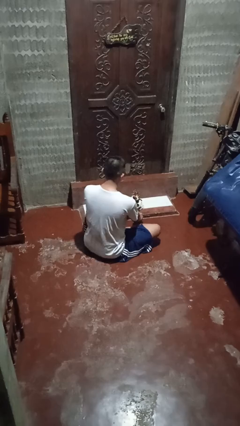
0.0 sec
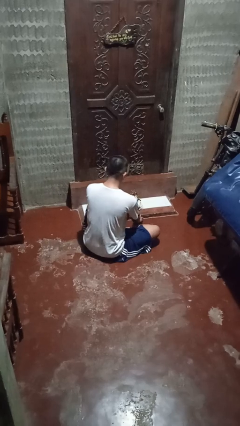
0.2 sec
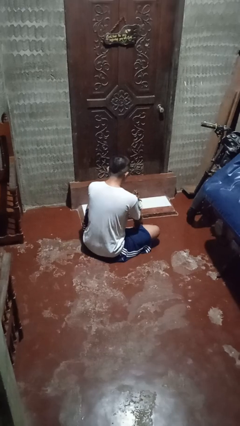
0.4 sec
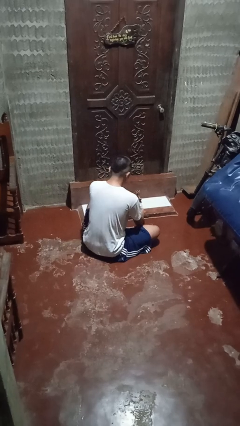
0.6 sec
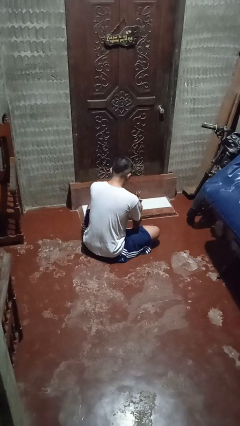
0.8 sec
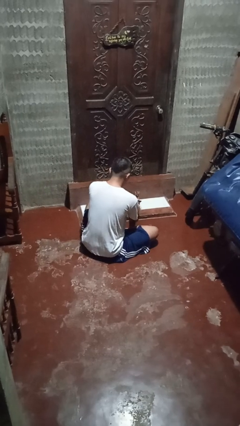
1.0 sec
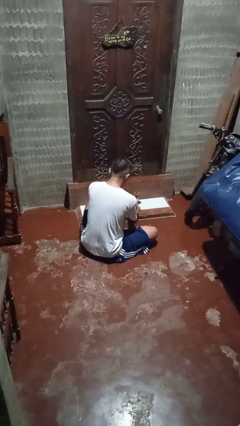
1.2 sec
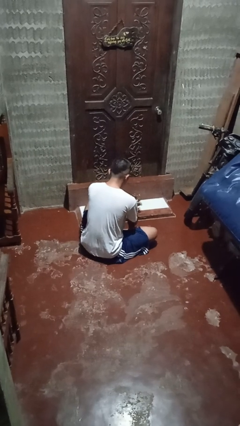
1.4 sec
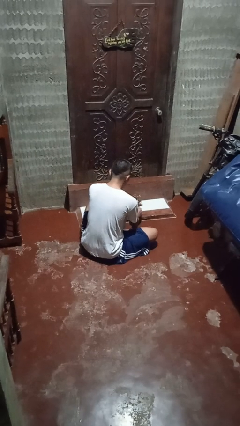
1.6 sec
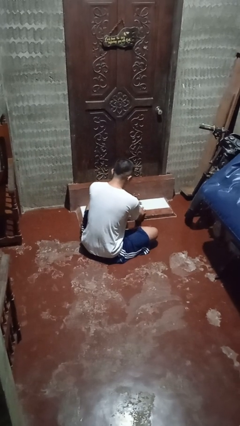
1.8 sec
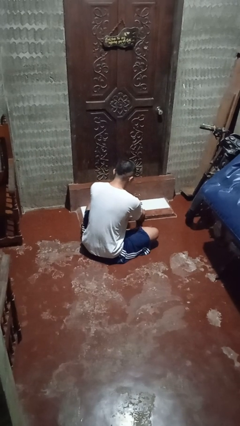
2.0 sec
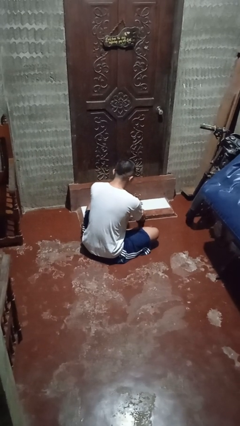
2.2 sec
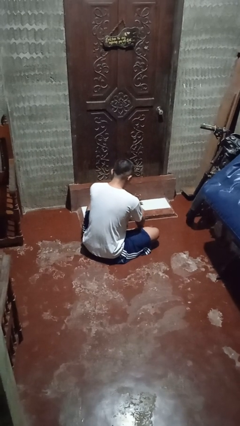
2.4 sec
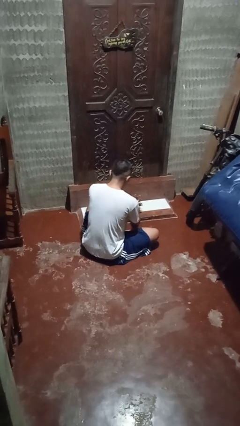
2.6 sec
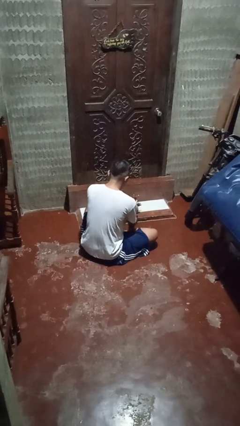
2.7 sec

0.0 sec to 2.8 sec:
person arranges flowers in vase

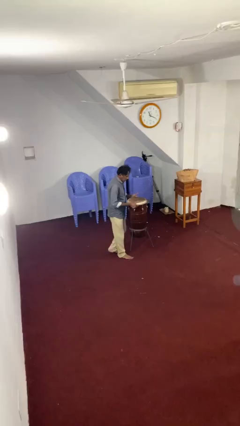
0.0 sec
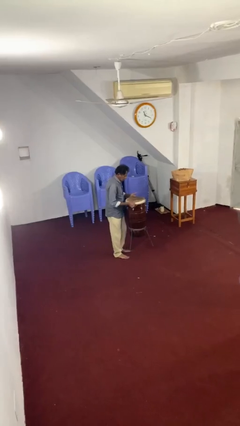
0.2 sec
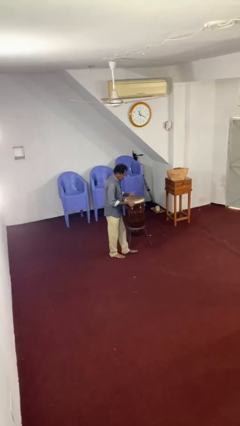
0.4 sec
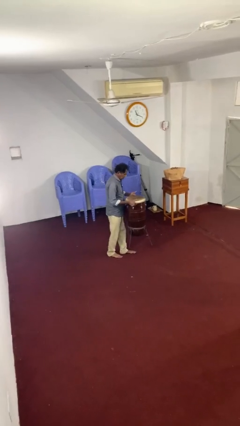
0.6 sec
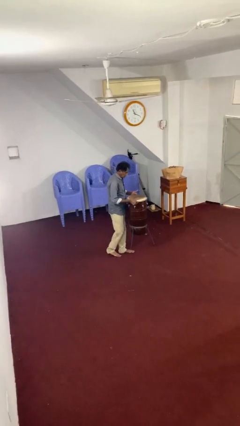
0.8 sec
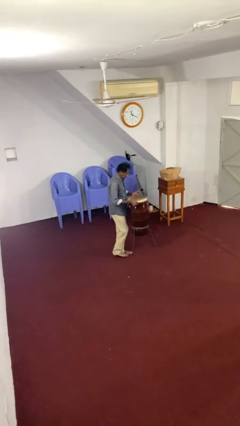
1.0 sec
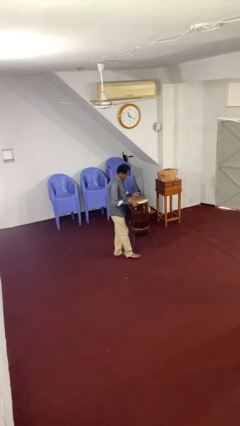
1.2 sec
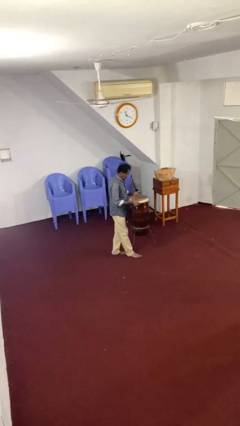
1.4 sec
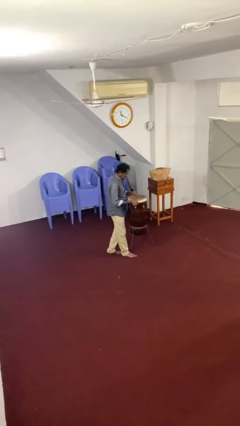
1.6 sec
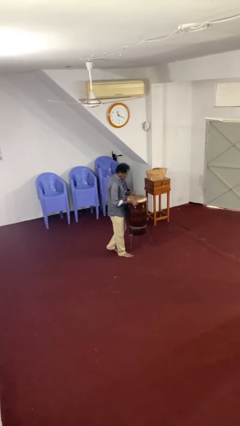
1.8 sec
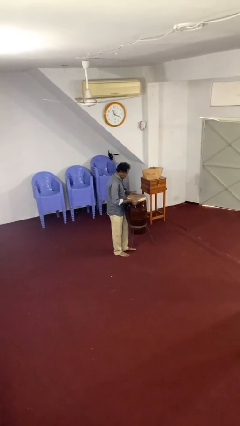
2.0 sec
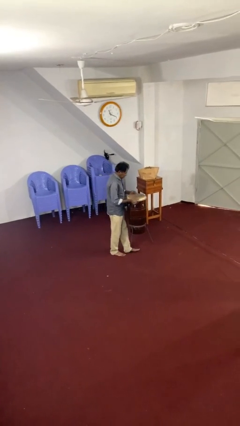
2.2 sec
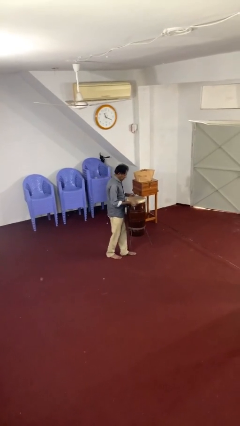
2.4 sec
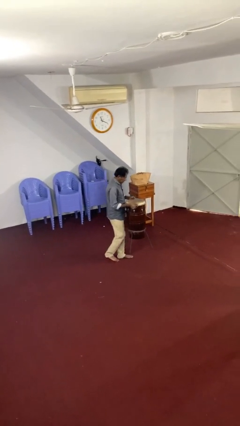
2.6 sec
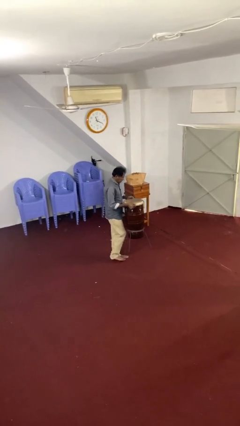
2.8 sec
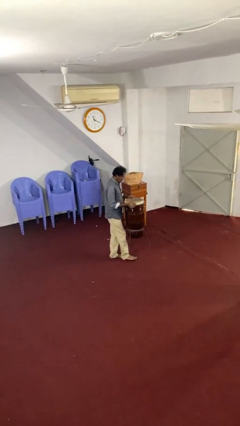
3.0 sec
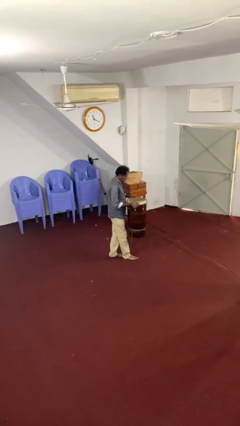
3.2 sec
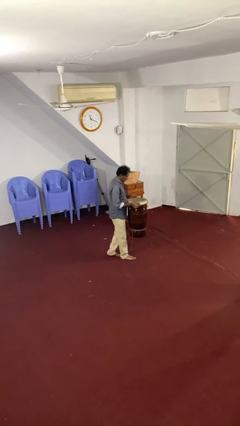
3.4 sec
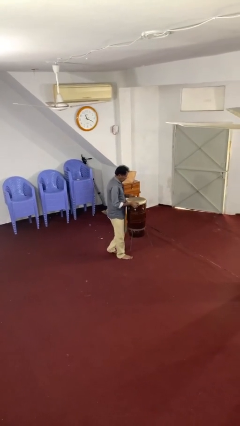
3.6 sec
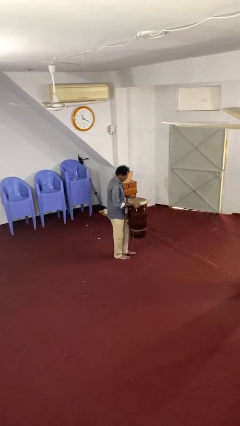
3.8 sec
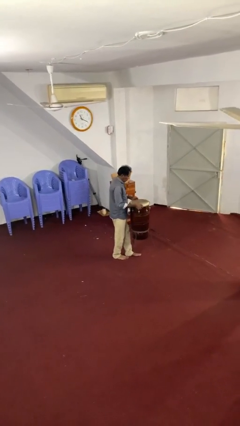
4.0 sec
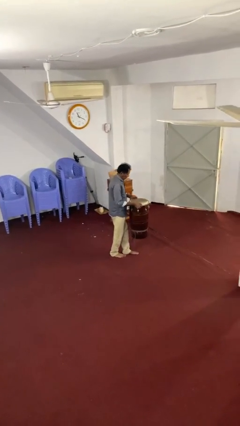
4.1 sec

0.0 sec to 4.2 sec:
person carries heavy object

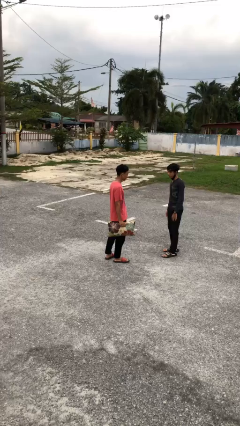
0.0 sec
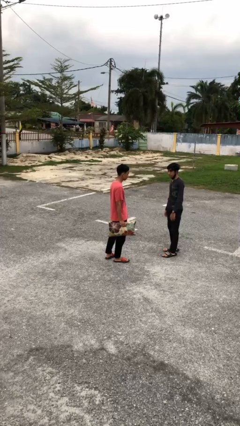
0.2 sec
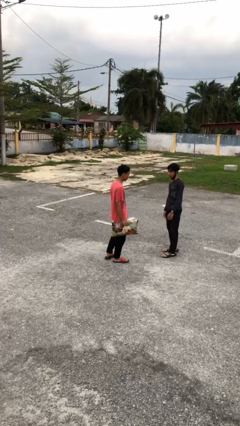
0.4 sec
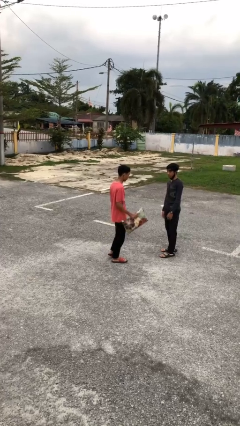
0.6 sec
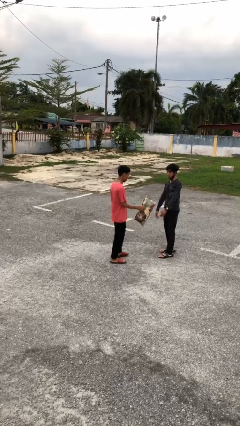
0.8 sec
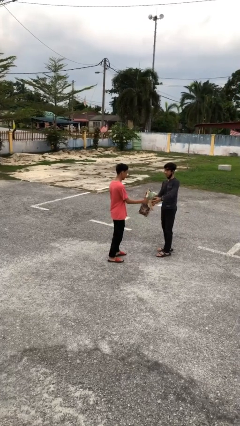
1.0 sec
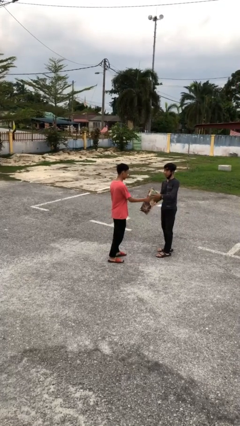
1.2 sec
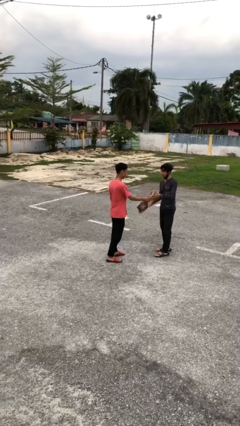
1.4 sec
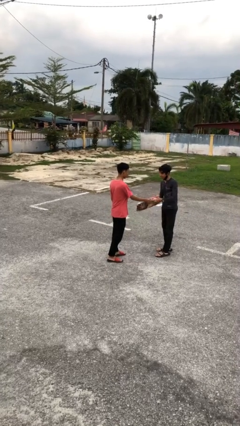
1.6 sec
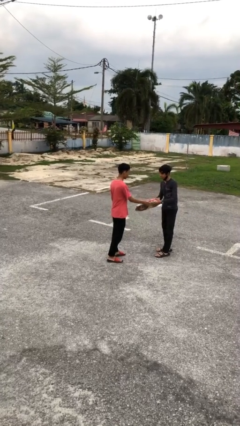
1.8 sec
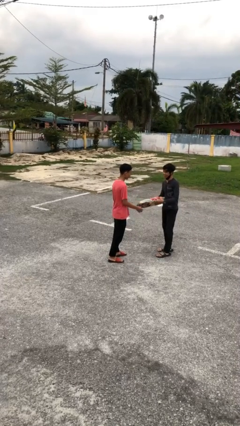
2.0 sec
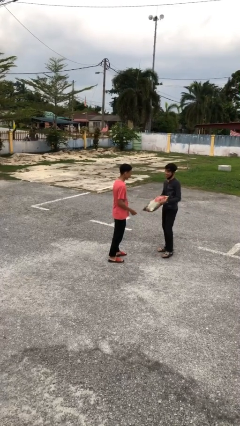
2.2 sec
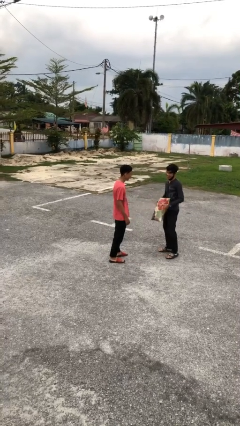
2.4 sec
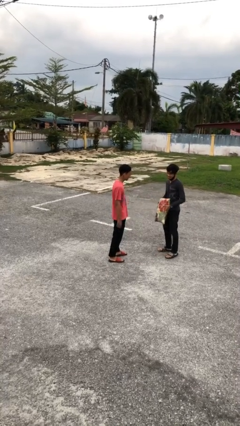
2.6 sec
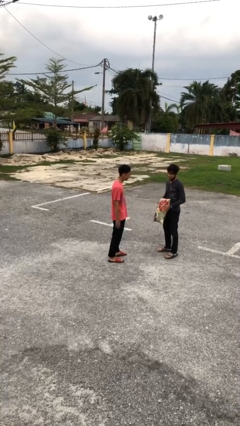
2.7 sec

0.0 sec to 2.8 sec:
person transfers object to person

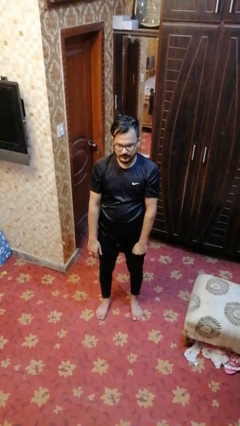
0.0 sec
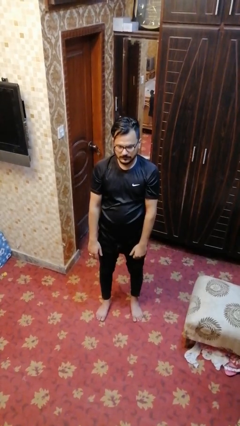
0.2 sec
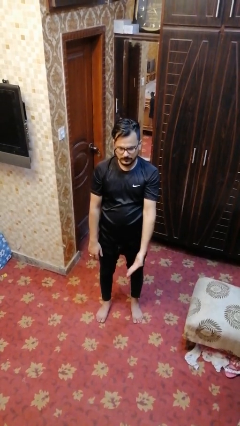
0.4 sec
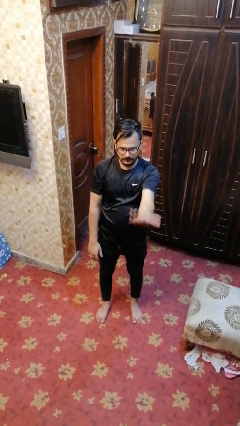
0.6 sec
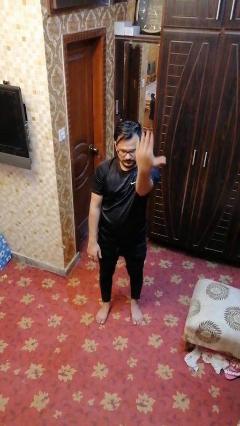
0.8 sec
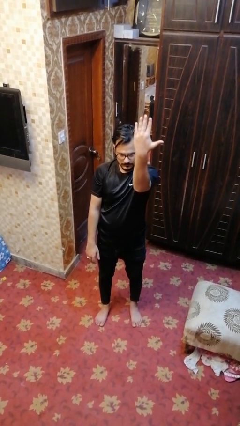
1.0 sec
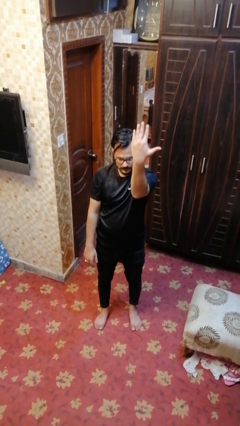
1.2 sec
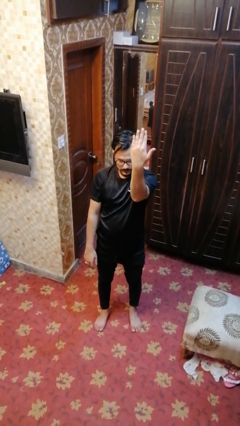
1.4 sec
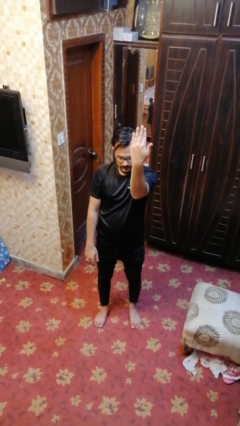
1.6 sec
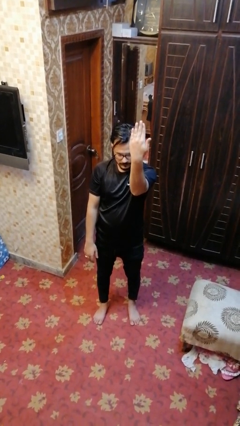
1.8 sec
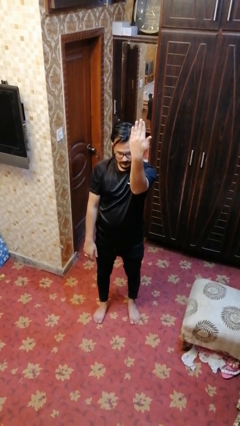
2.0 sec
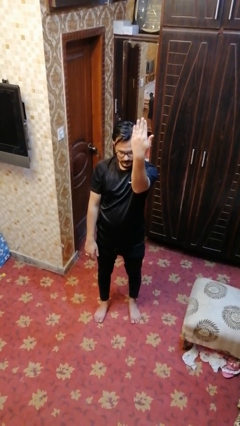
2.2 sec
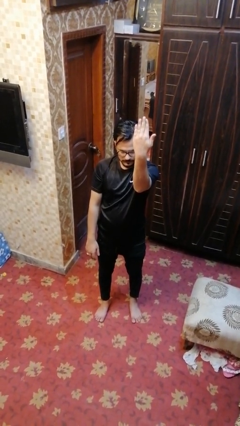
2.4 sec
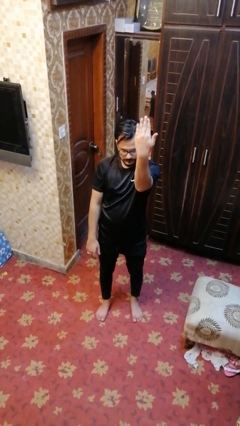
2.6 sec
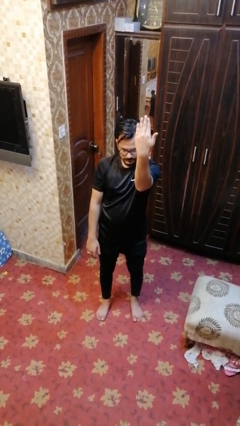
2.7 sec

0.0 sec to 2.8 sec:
person gestures number five

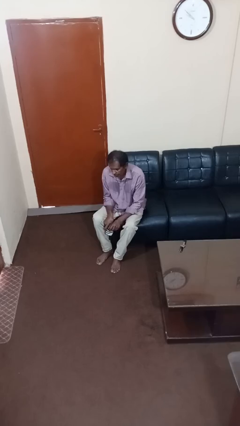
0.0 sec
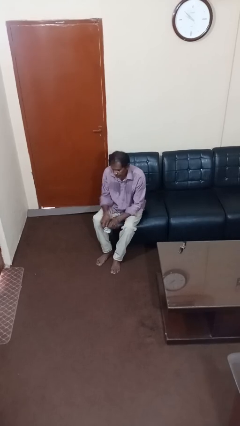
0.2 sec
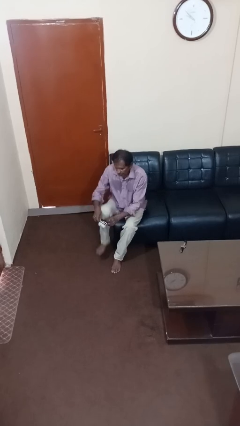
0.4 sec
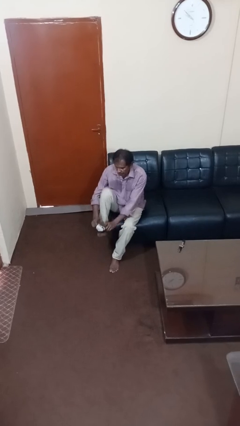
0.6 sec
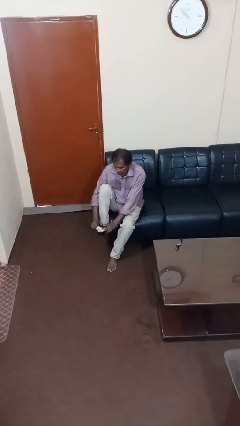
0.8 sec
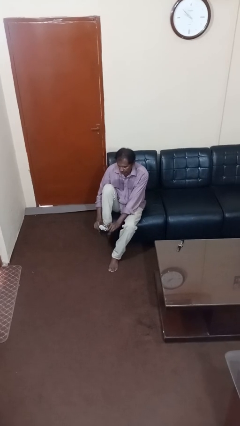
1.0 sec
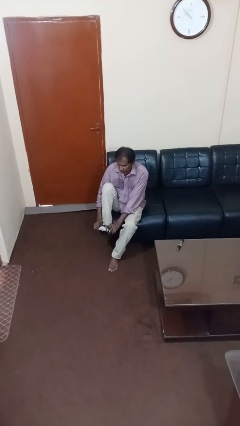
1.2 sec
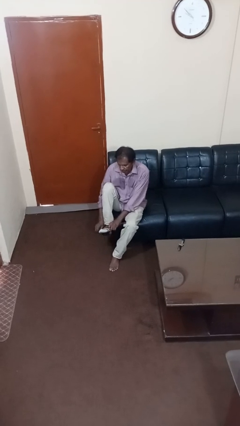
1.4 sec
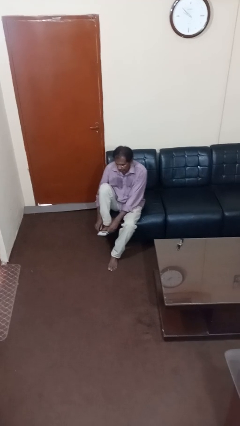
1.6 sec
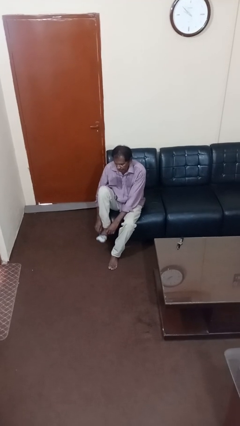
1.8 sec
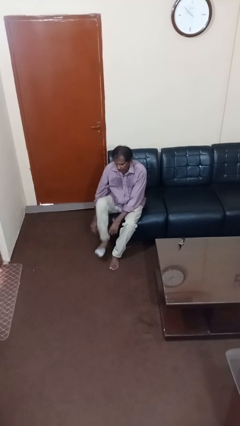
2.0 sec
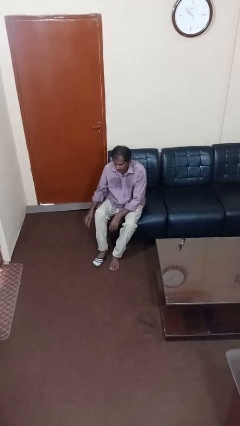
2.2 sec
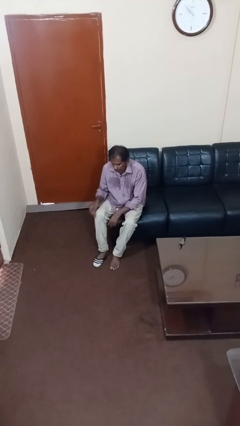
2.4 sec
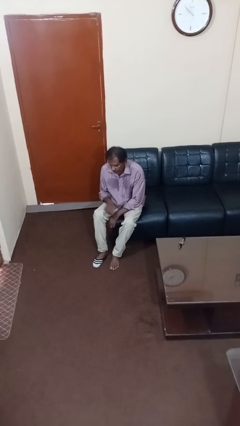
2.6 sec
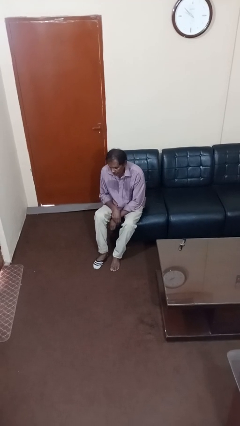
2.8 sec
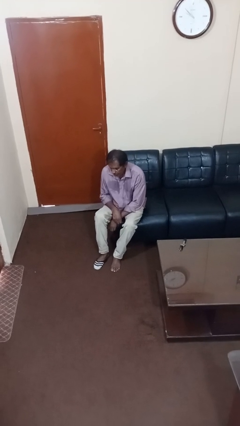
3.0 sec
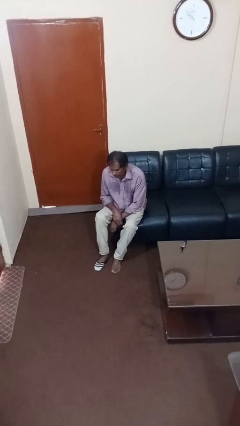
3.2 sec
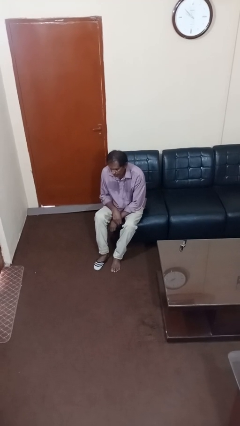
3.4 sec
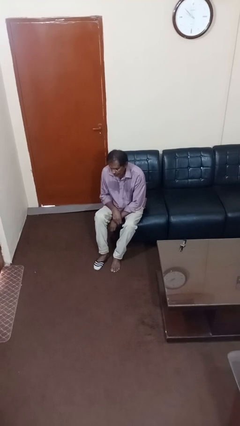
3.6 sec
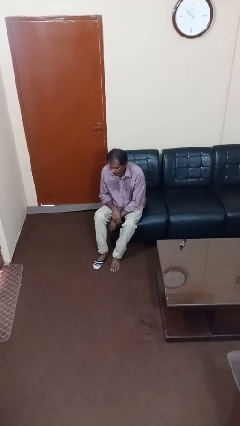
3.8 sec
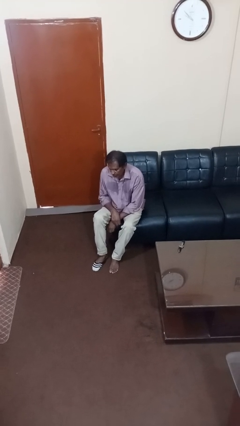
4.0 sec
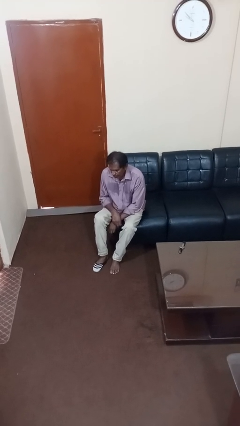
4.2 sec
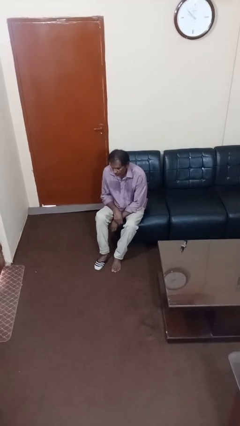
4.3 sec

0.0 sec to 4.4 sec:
person puts on socks

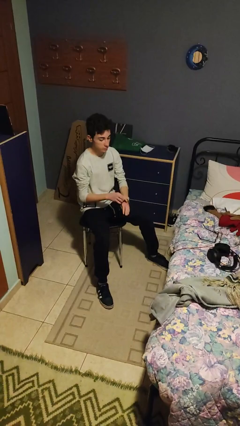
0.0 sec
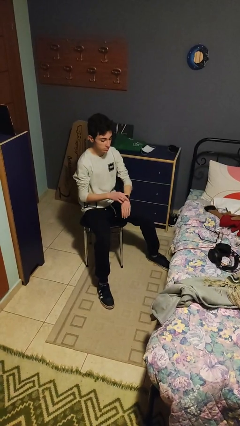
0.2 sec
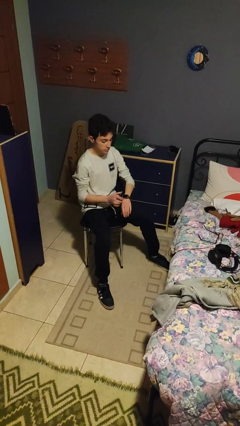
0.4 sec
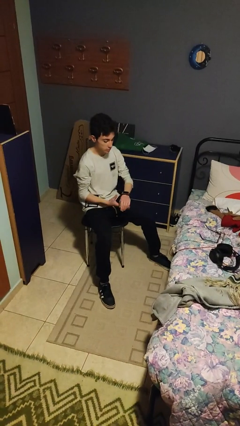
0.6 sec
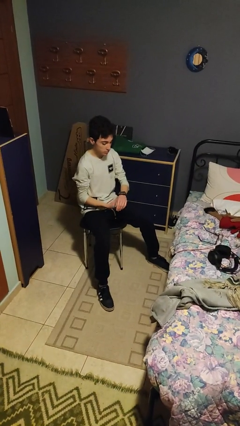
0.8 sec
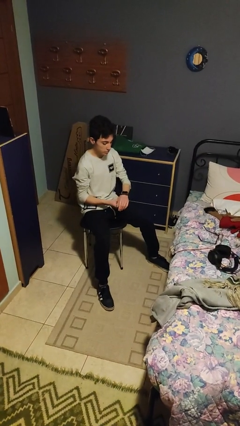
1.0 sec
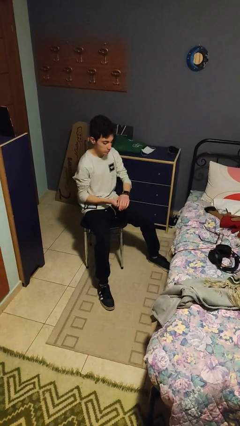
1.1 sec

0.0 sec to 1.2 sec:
person puts on wristwatch
